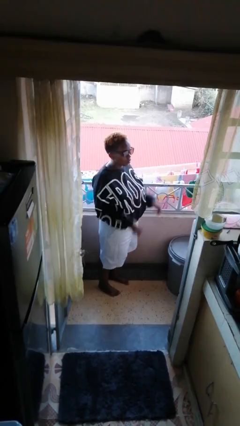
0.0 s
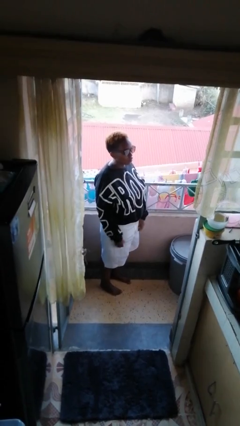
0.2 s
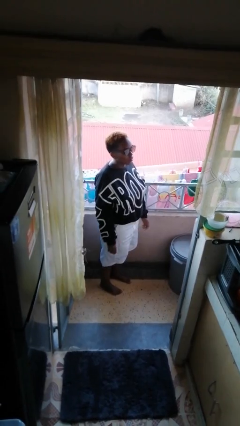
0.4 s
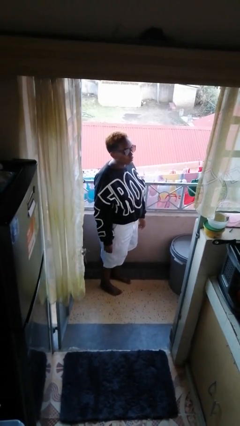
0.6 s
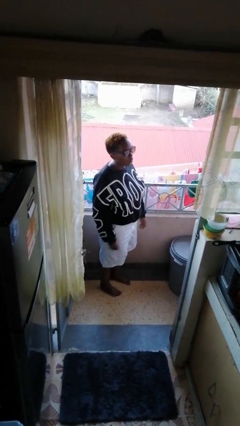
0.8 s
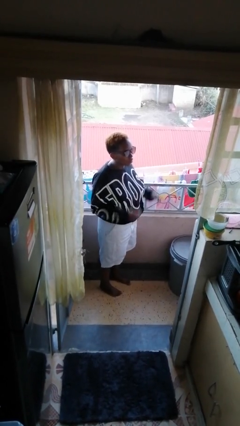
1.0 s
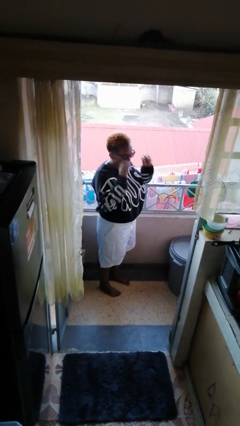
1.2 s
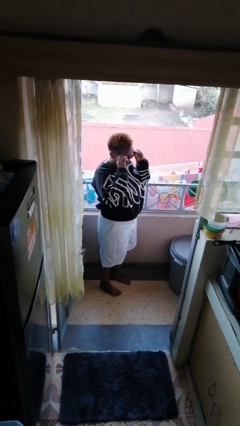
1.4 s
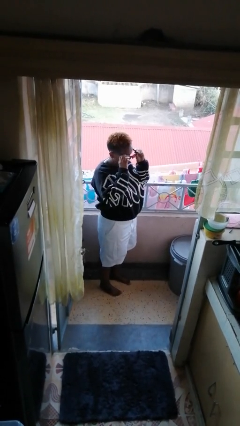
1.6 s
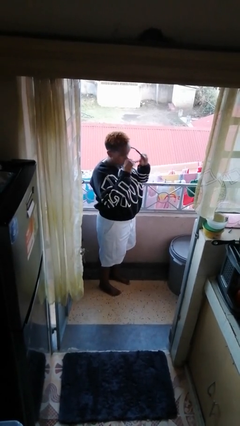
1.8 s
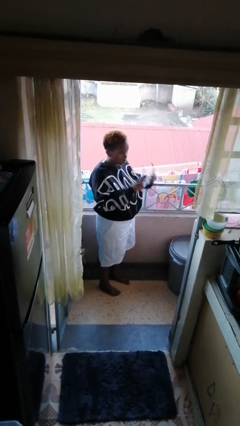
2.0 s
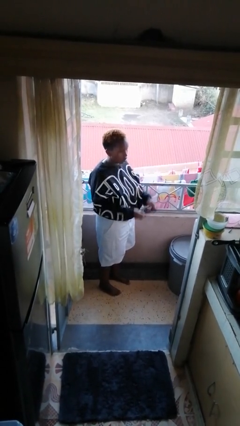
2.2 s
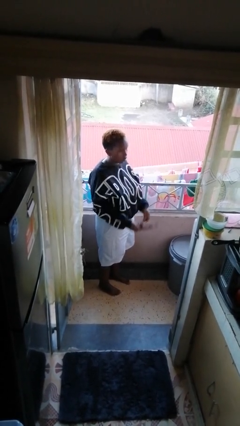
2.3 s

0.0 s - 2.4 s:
person takes off sunglasses

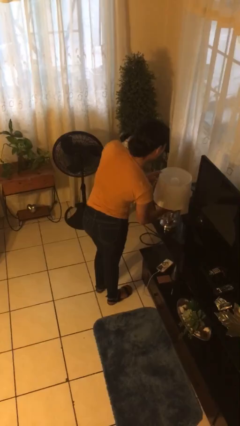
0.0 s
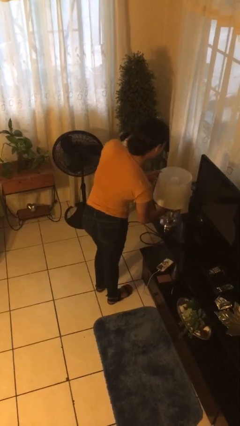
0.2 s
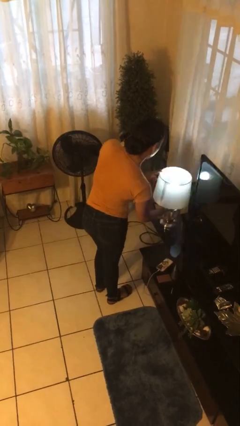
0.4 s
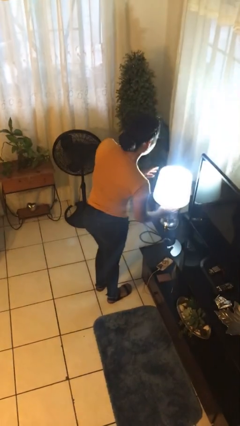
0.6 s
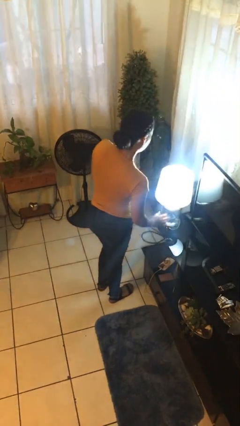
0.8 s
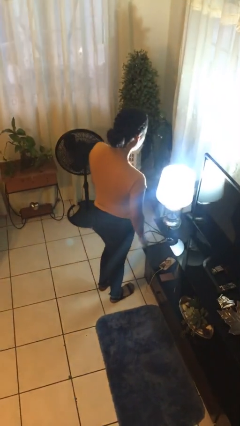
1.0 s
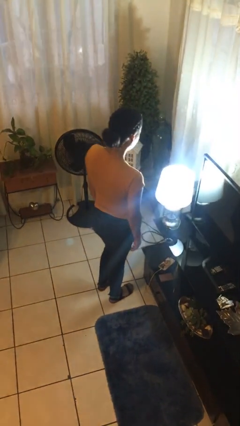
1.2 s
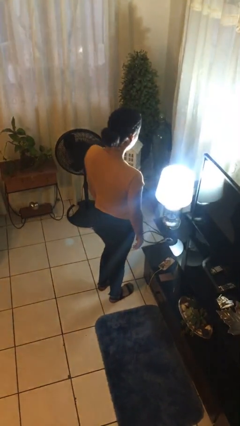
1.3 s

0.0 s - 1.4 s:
person turns on lamp

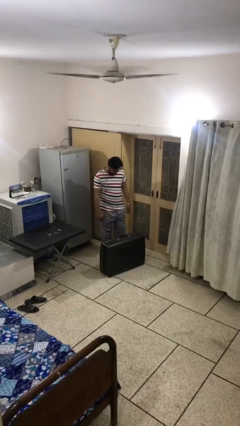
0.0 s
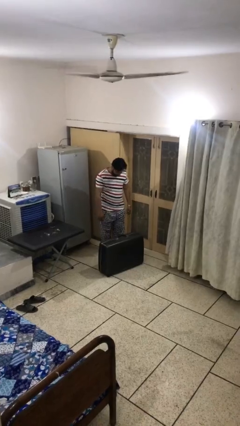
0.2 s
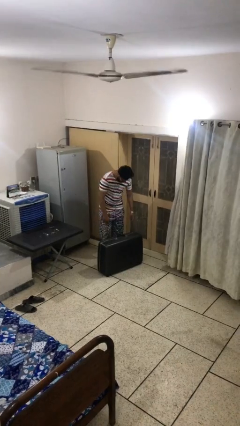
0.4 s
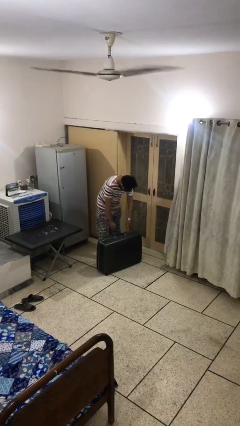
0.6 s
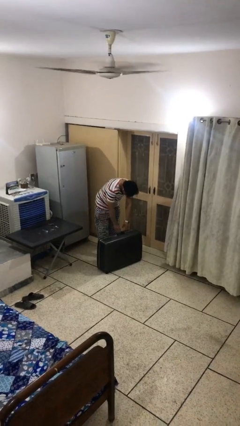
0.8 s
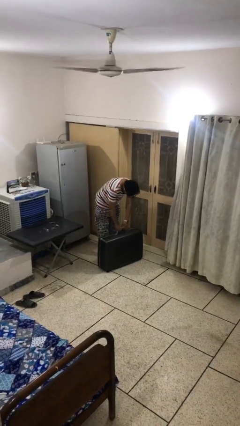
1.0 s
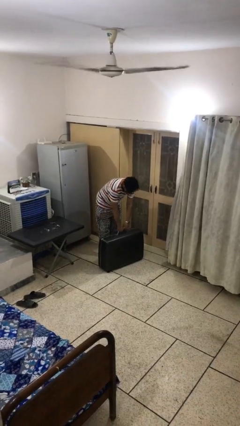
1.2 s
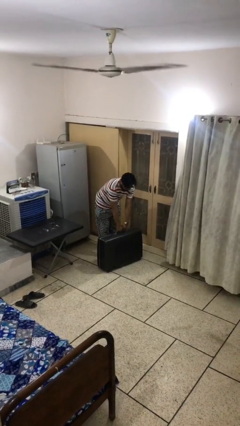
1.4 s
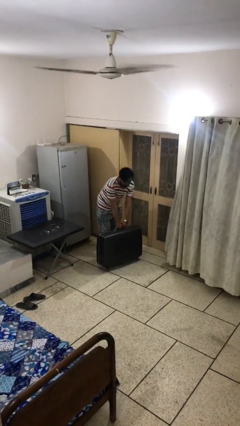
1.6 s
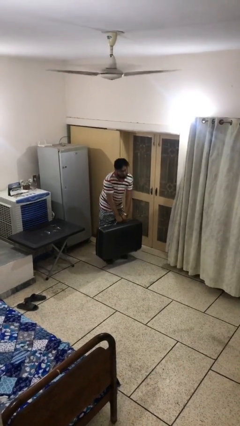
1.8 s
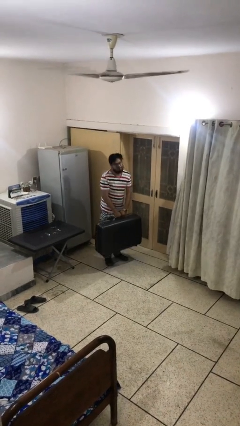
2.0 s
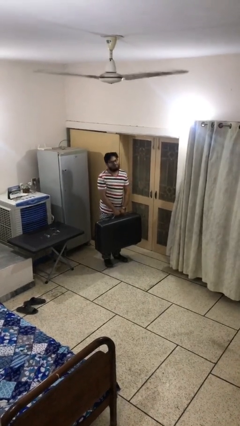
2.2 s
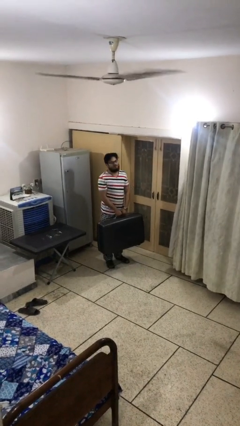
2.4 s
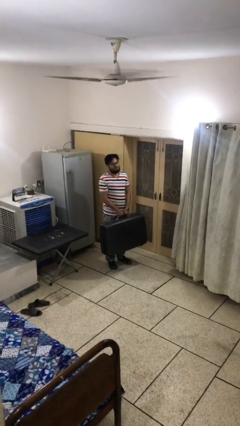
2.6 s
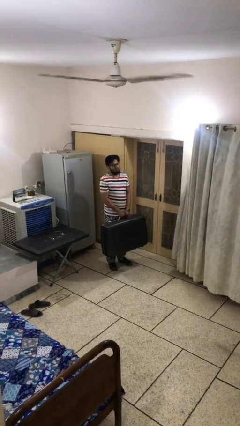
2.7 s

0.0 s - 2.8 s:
person picks up object from floor

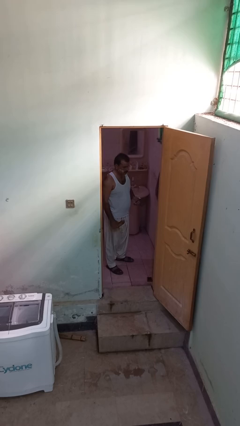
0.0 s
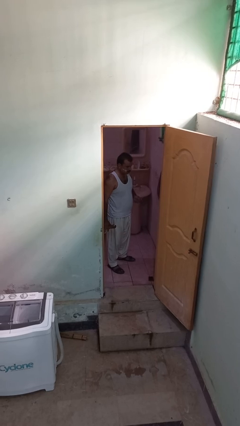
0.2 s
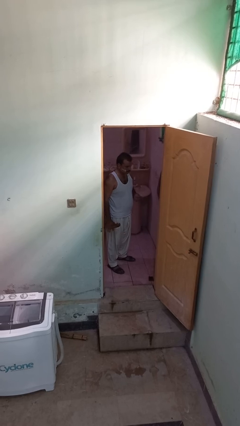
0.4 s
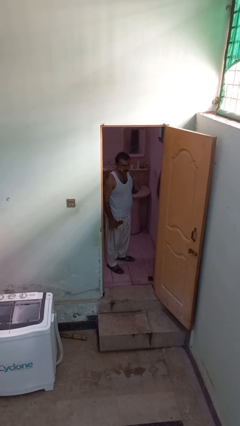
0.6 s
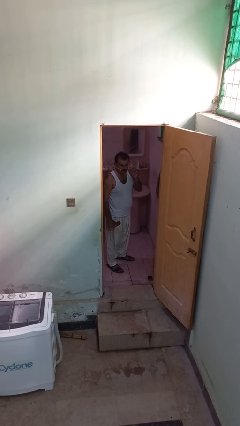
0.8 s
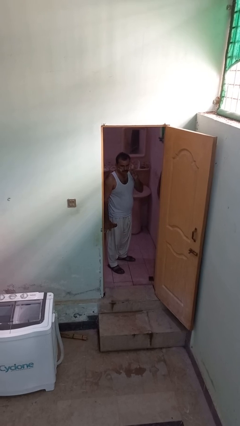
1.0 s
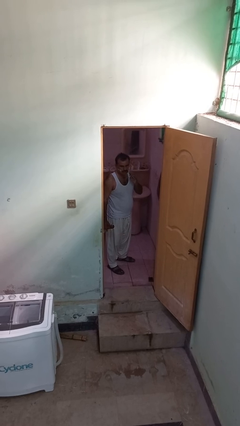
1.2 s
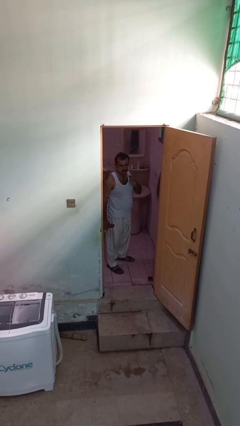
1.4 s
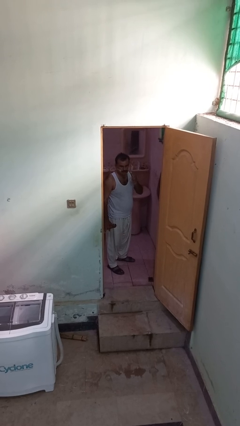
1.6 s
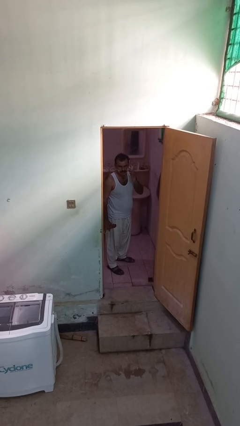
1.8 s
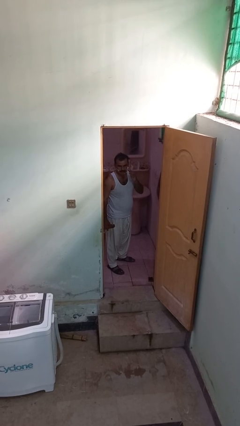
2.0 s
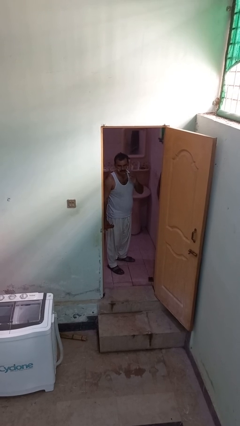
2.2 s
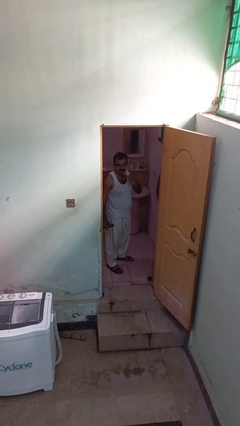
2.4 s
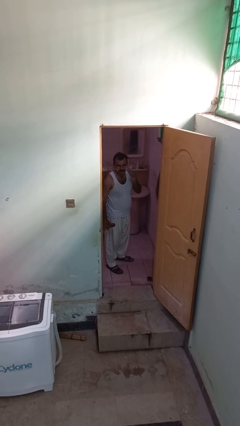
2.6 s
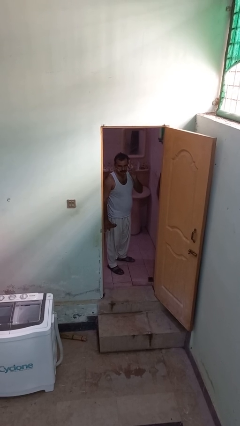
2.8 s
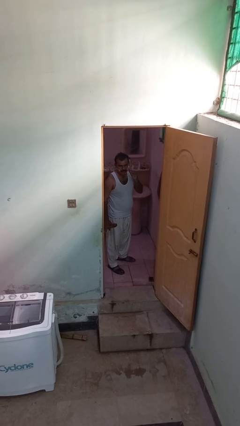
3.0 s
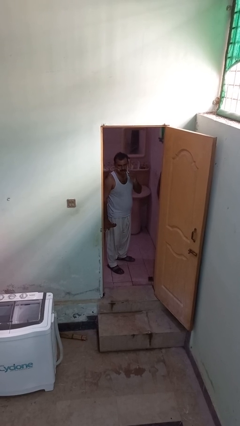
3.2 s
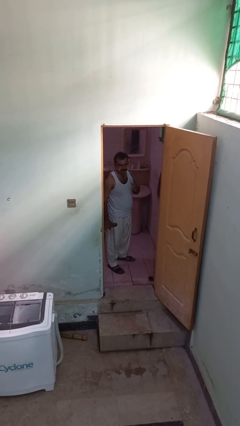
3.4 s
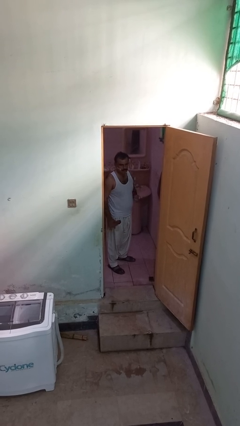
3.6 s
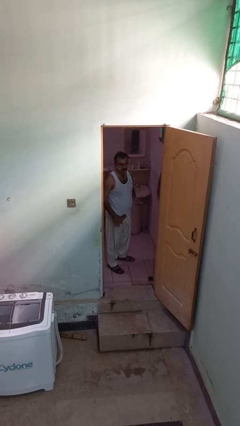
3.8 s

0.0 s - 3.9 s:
person shaves face

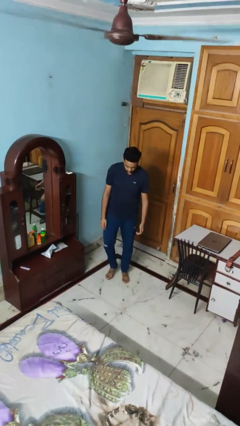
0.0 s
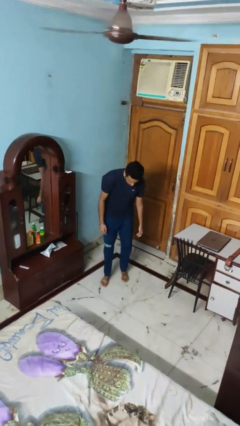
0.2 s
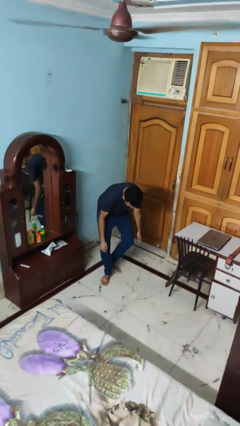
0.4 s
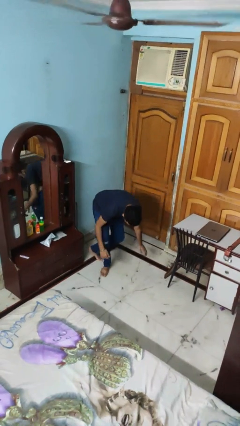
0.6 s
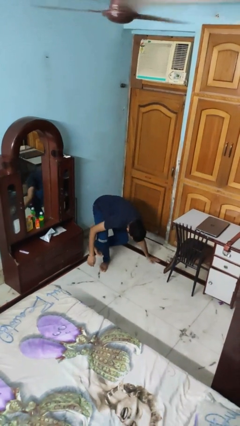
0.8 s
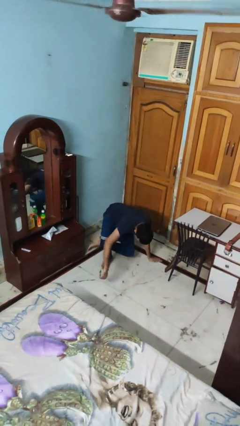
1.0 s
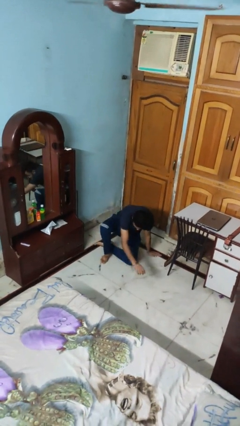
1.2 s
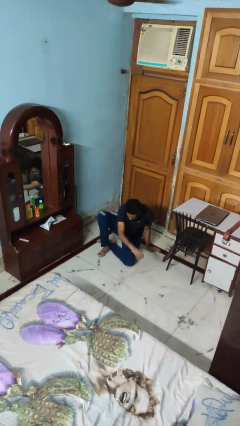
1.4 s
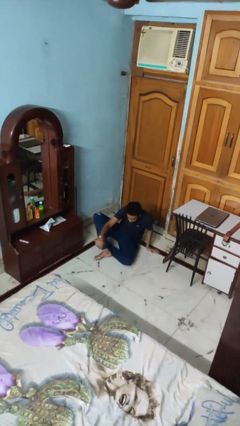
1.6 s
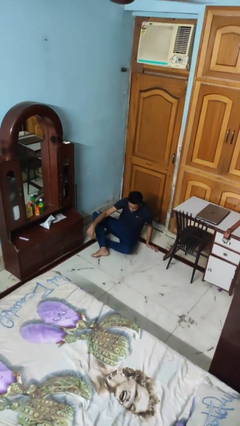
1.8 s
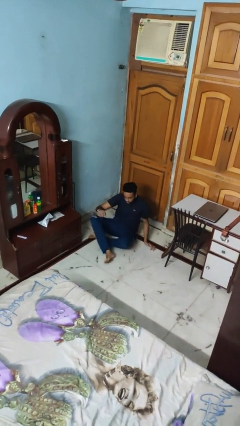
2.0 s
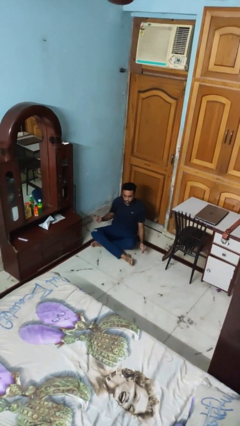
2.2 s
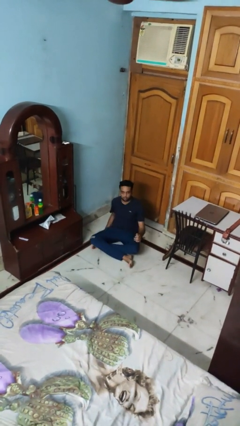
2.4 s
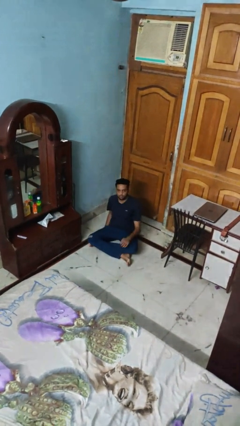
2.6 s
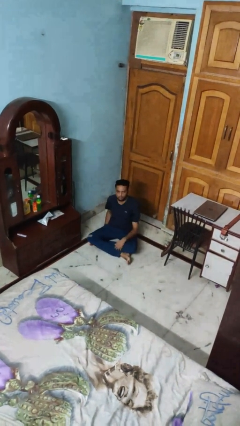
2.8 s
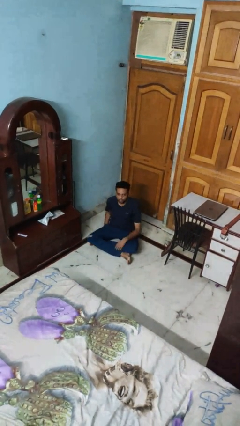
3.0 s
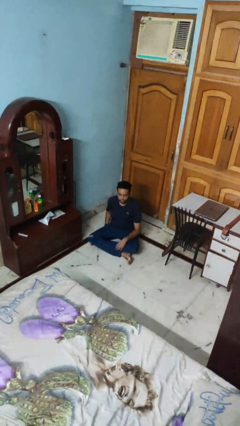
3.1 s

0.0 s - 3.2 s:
person sits crisscross

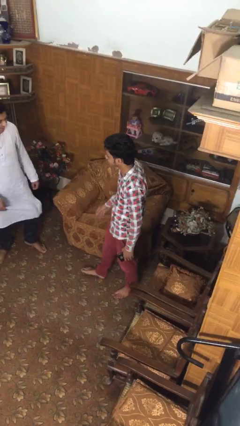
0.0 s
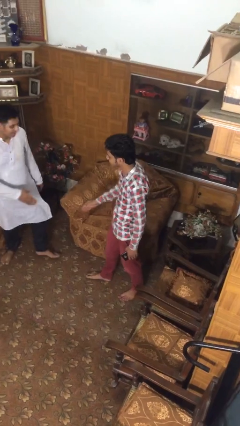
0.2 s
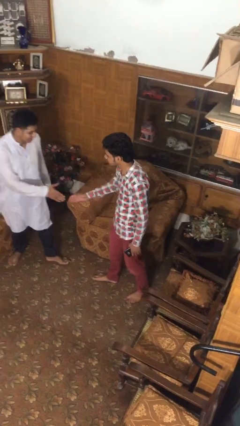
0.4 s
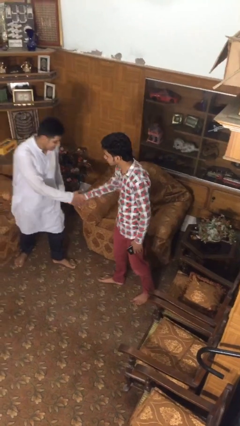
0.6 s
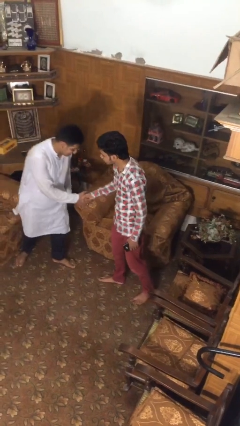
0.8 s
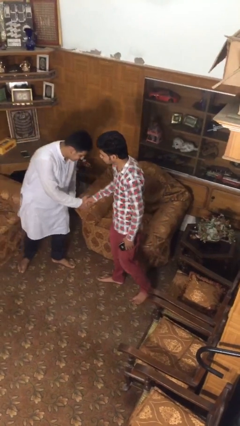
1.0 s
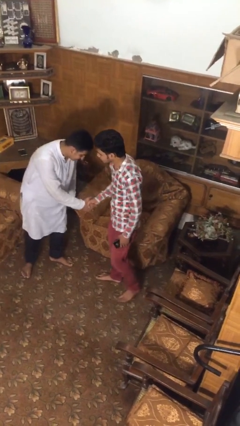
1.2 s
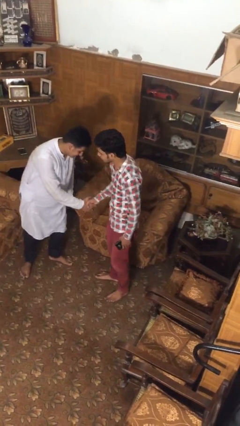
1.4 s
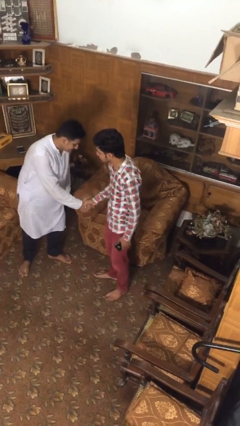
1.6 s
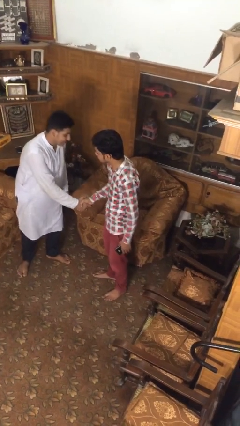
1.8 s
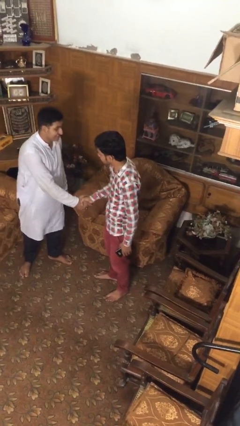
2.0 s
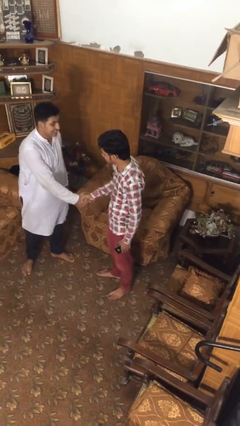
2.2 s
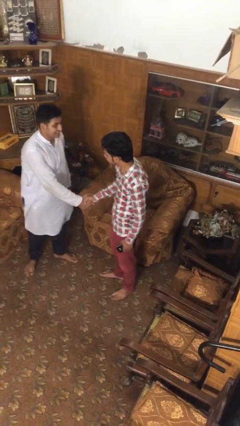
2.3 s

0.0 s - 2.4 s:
person shakes hand

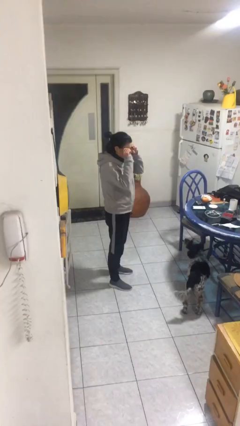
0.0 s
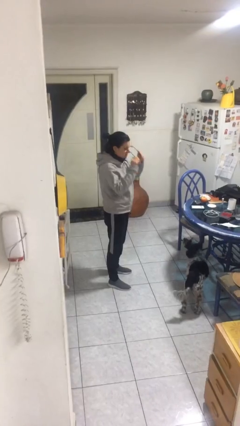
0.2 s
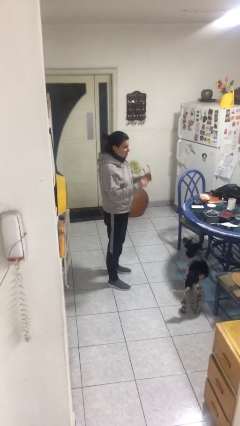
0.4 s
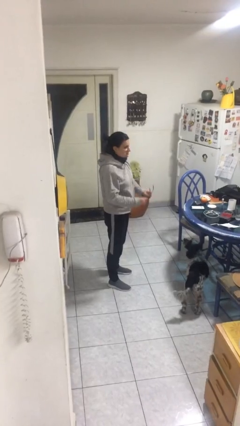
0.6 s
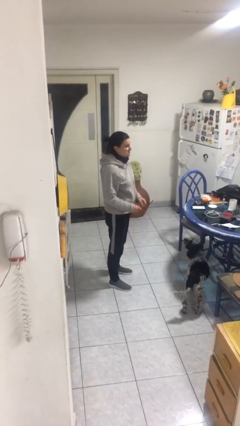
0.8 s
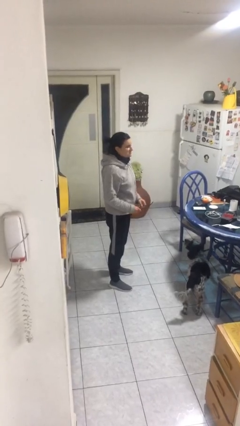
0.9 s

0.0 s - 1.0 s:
person takes off glasses

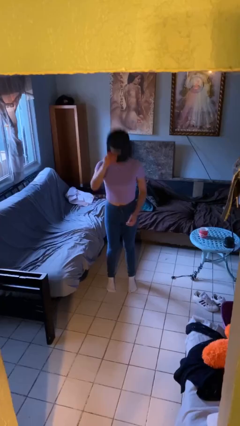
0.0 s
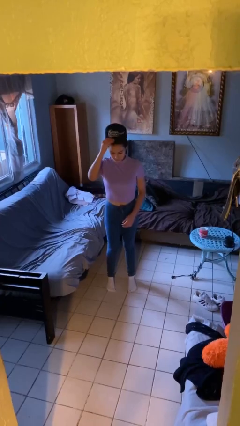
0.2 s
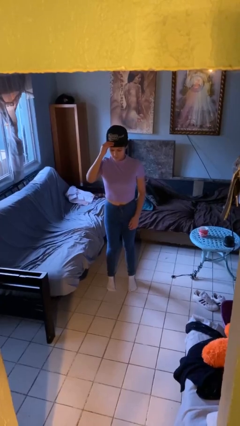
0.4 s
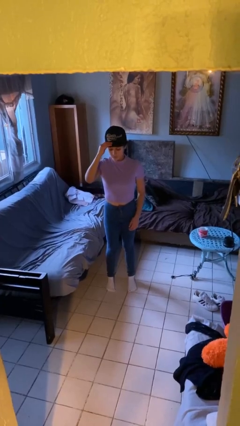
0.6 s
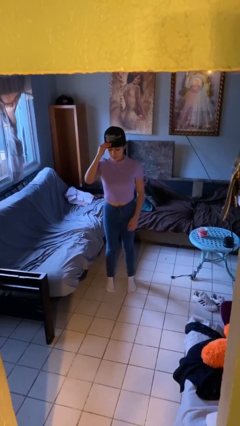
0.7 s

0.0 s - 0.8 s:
person puts on hat
